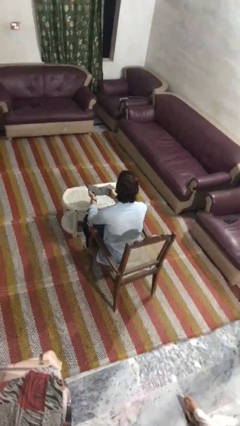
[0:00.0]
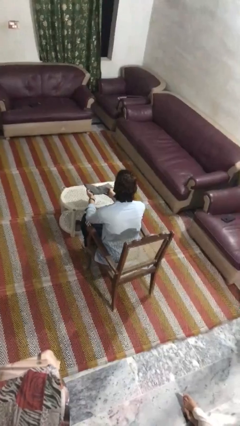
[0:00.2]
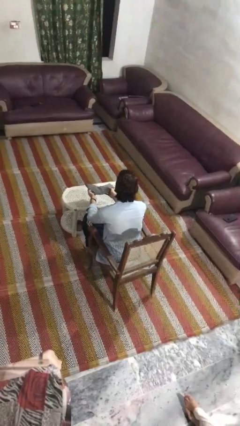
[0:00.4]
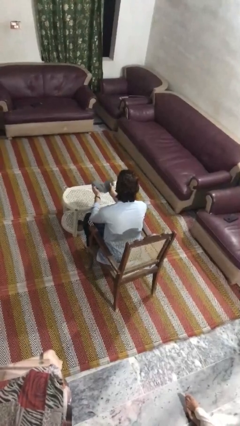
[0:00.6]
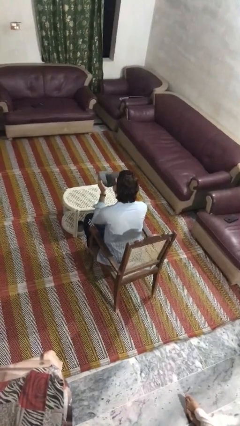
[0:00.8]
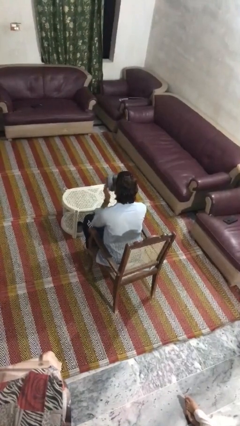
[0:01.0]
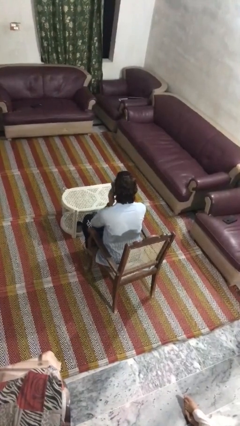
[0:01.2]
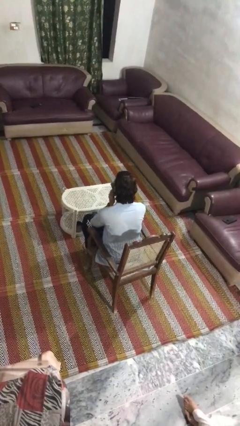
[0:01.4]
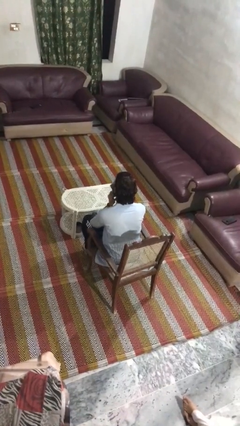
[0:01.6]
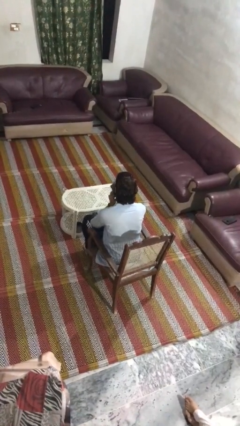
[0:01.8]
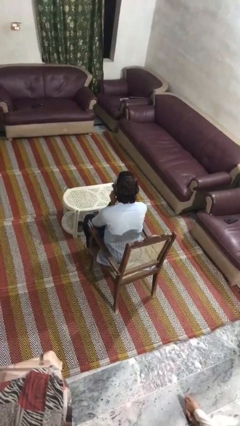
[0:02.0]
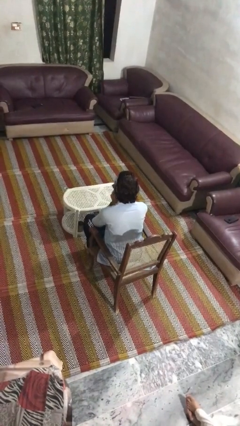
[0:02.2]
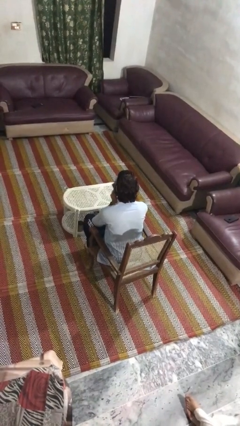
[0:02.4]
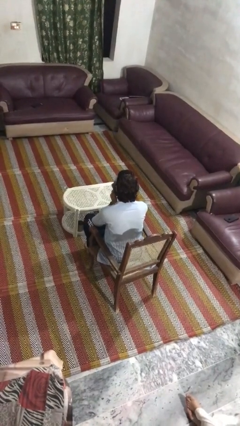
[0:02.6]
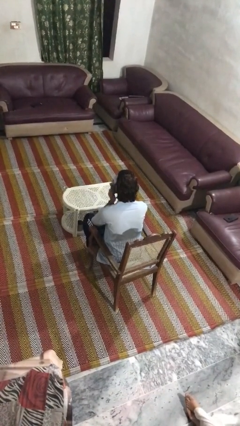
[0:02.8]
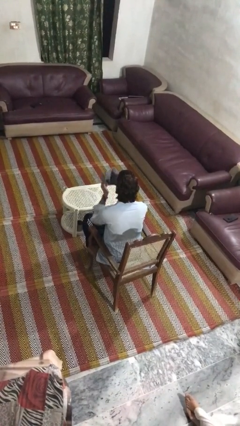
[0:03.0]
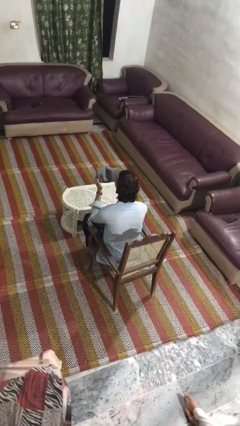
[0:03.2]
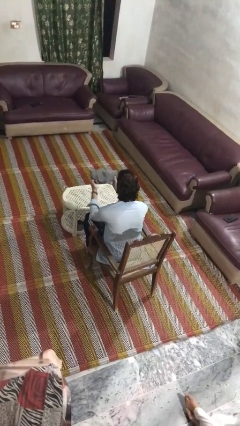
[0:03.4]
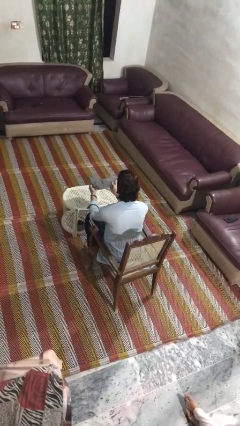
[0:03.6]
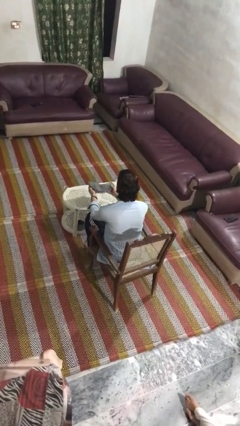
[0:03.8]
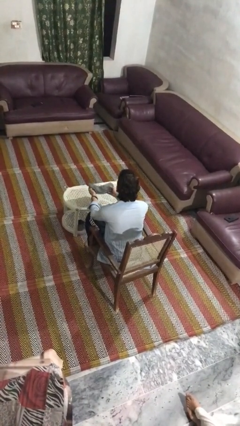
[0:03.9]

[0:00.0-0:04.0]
person wipes mouth with napkin

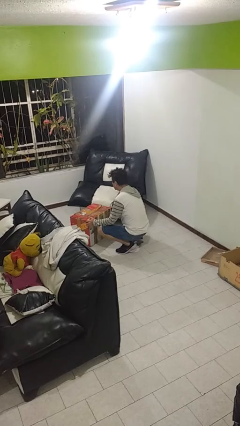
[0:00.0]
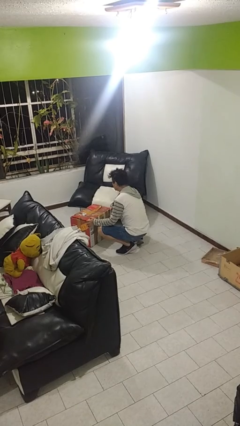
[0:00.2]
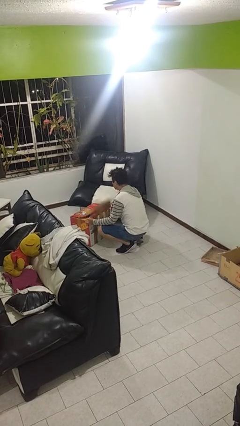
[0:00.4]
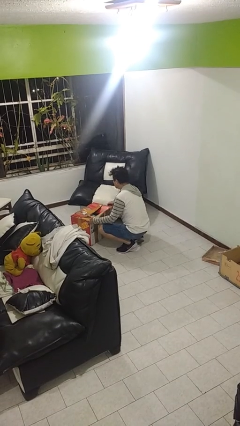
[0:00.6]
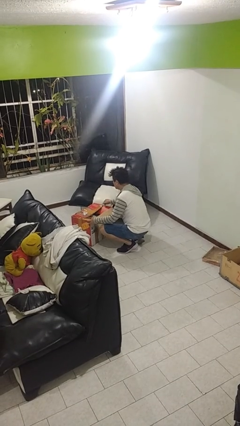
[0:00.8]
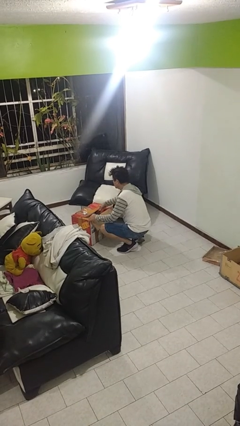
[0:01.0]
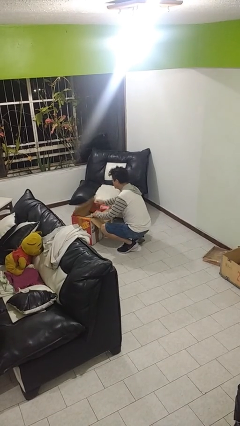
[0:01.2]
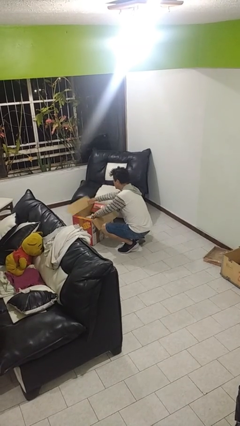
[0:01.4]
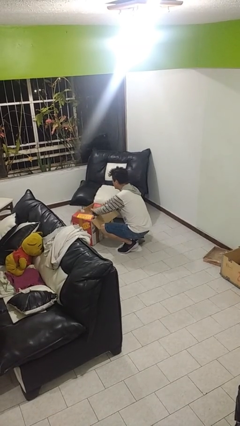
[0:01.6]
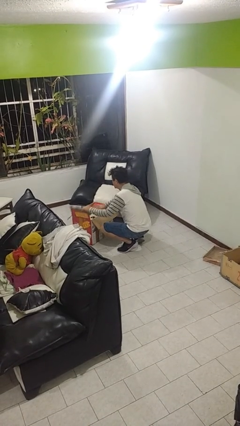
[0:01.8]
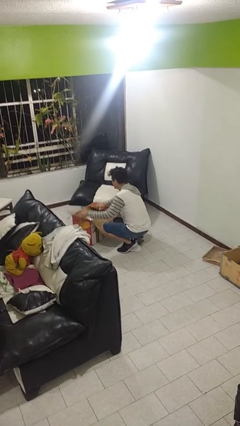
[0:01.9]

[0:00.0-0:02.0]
person opens box

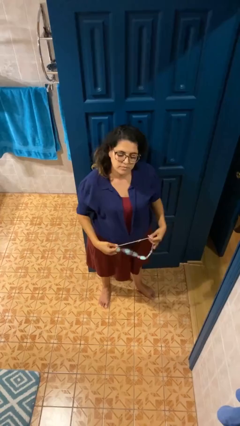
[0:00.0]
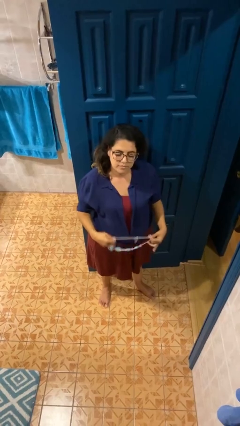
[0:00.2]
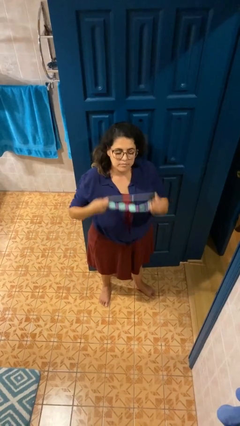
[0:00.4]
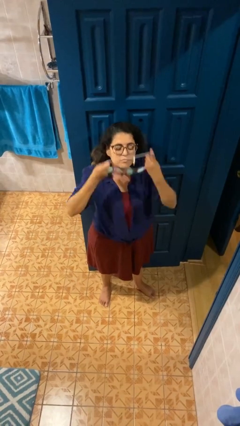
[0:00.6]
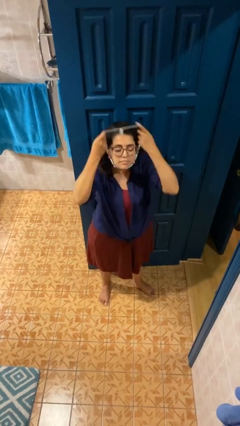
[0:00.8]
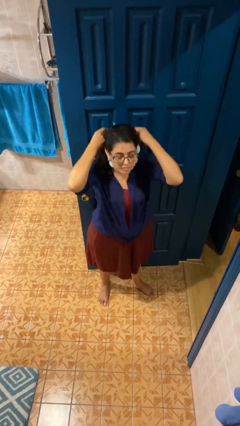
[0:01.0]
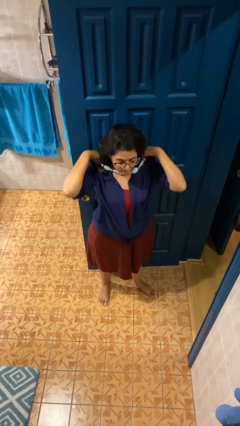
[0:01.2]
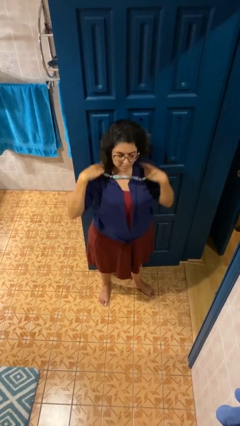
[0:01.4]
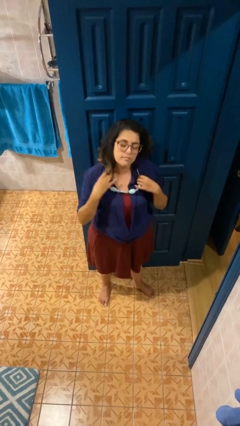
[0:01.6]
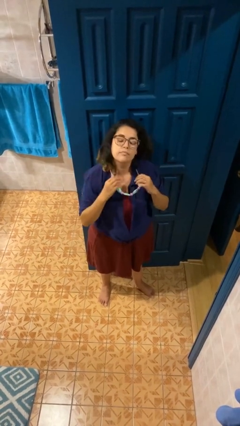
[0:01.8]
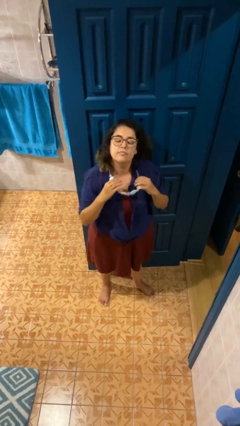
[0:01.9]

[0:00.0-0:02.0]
person puts on necklace

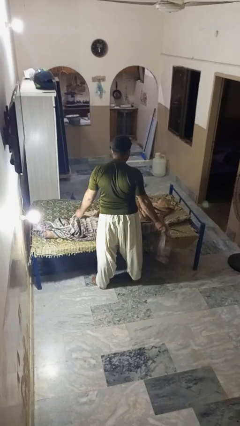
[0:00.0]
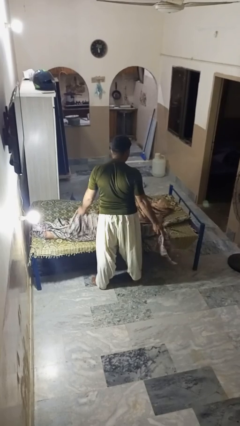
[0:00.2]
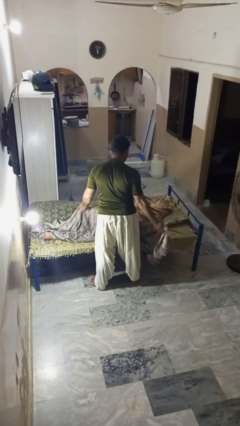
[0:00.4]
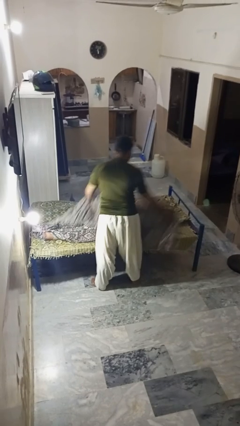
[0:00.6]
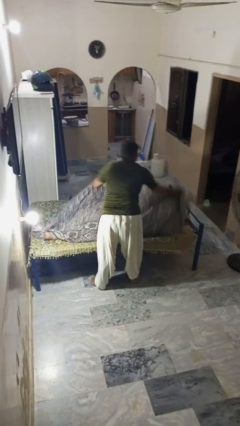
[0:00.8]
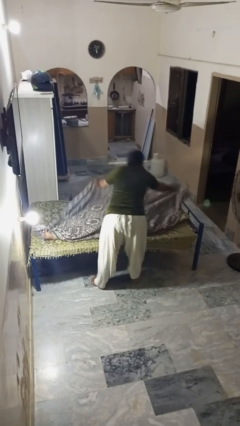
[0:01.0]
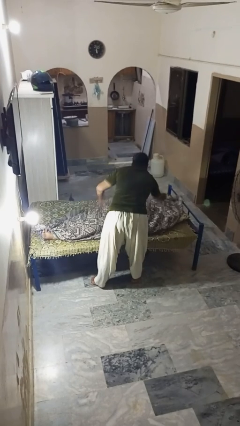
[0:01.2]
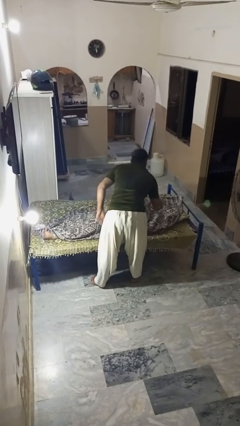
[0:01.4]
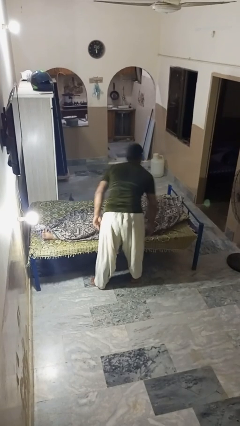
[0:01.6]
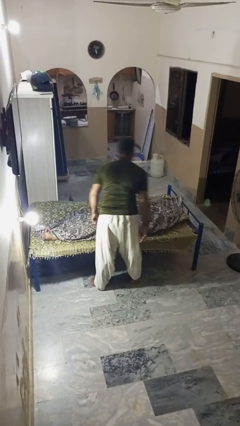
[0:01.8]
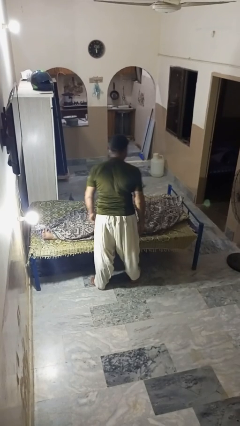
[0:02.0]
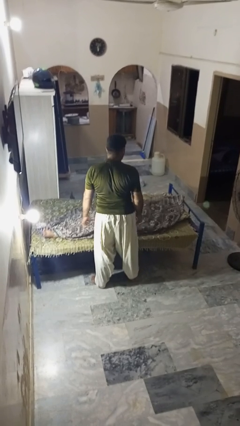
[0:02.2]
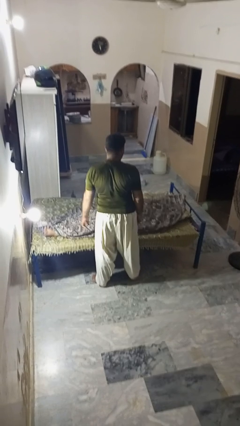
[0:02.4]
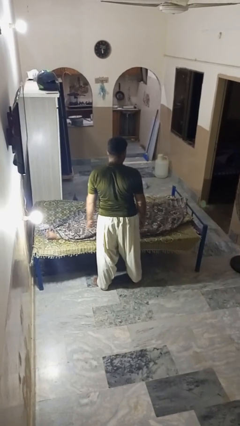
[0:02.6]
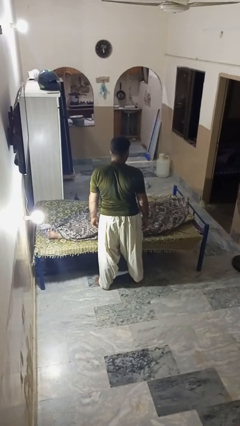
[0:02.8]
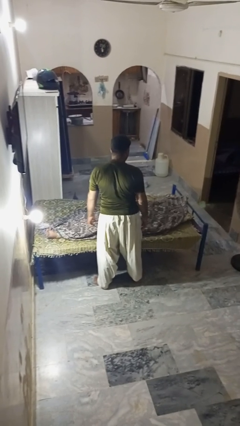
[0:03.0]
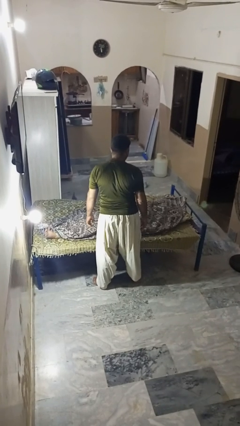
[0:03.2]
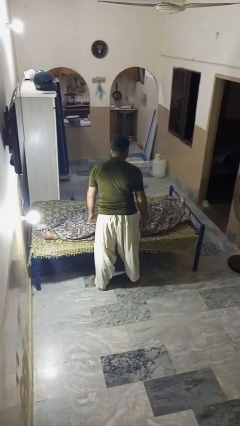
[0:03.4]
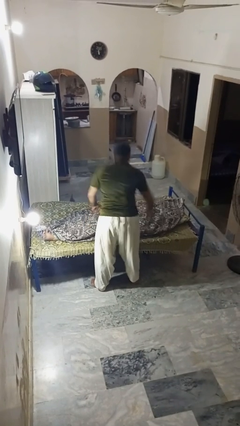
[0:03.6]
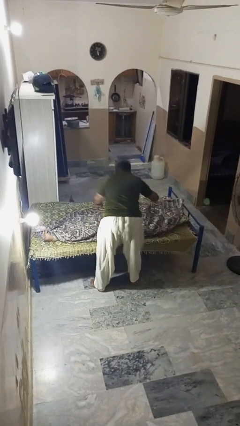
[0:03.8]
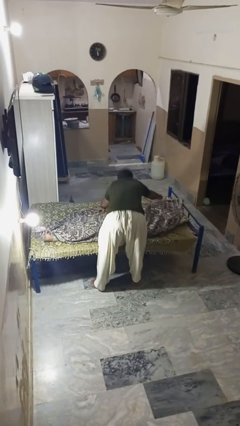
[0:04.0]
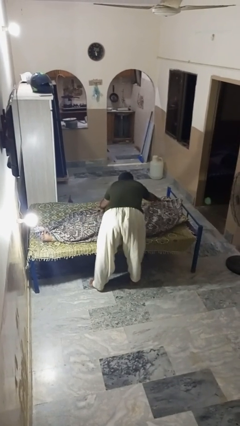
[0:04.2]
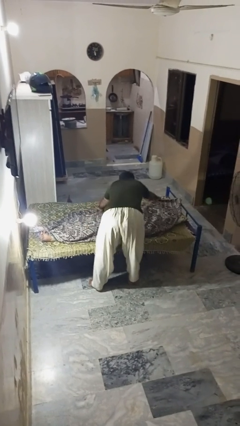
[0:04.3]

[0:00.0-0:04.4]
person covers friend with blanket

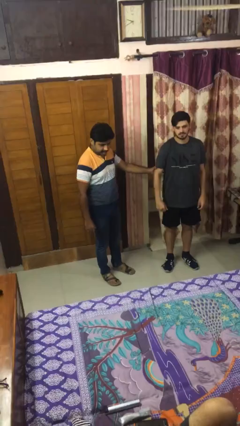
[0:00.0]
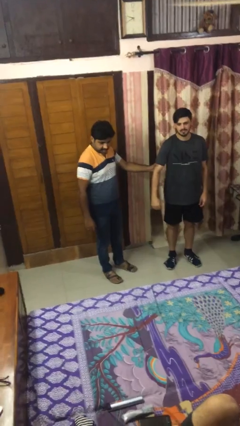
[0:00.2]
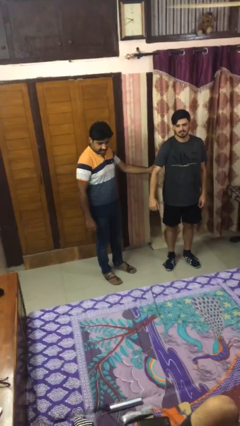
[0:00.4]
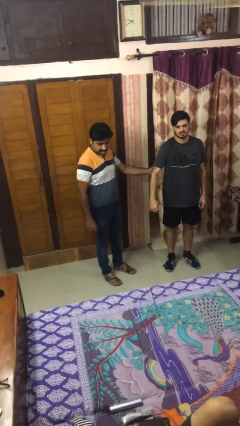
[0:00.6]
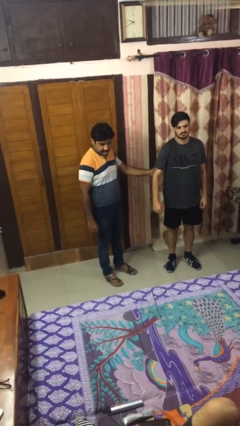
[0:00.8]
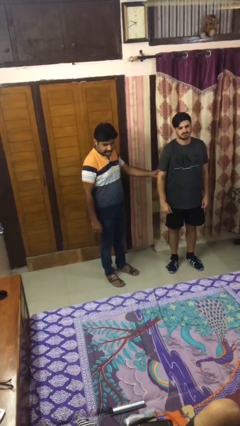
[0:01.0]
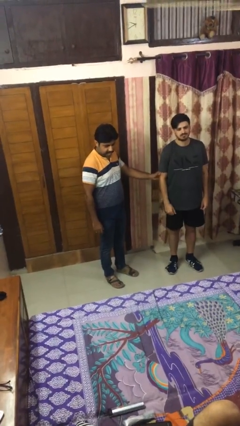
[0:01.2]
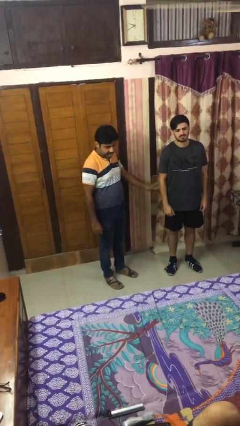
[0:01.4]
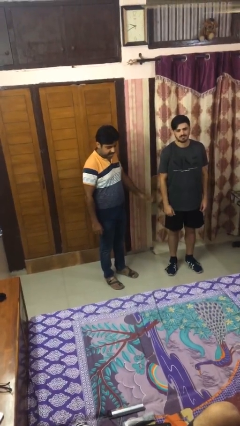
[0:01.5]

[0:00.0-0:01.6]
person grabs person by bicep

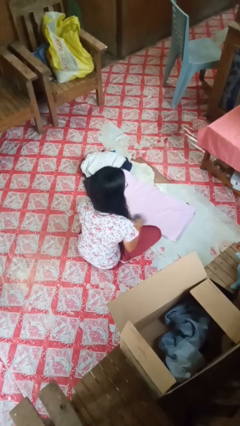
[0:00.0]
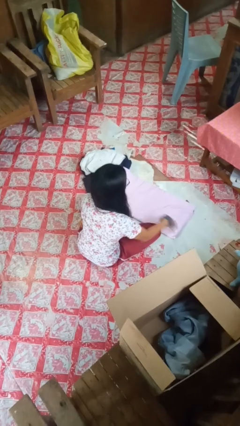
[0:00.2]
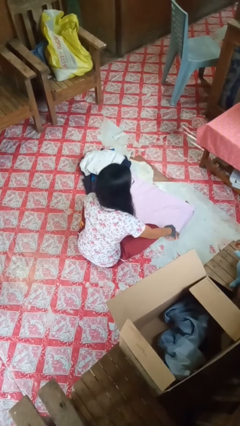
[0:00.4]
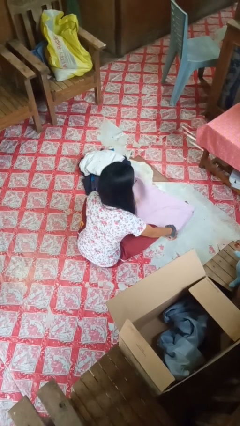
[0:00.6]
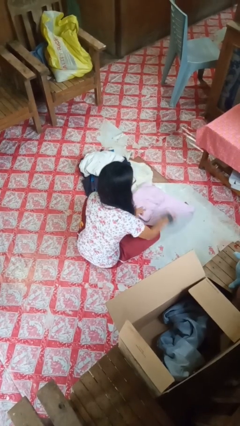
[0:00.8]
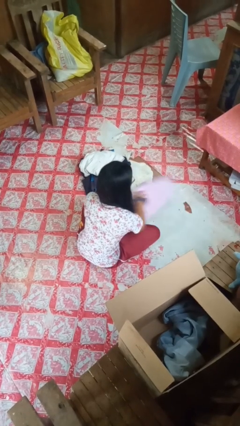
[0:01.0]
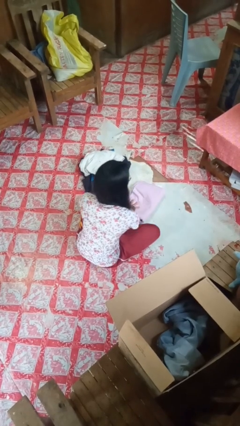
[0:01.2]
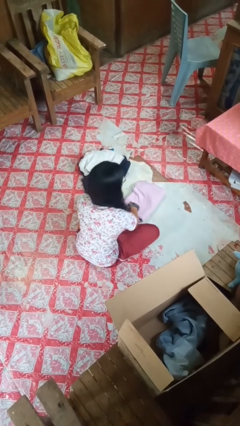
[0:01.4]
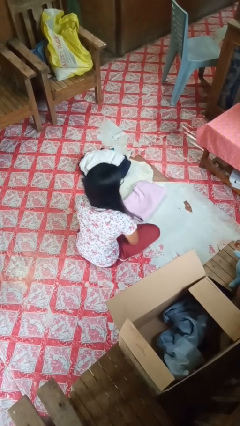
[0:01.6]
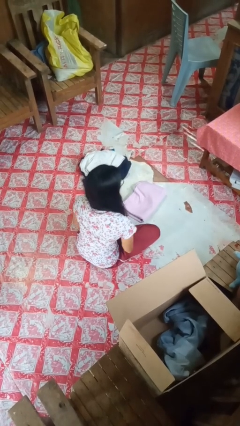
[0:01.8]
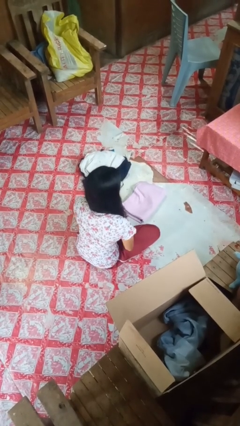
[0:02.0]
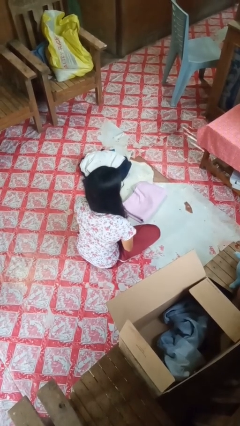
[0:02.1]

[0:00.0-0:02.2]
person folds towel

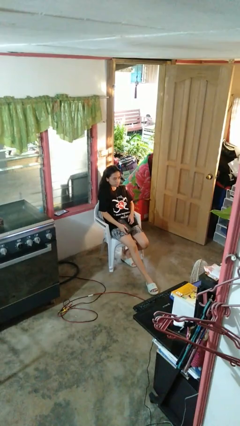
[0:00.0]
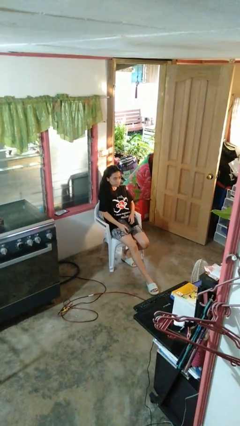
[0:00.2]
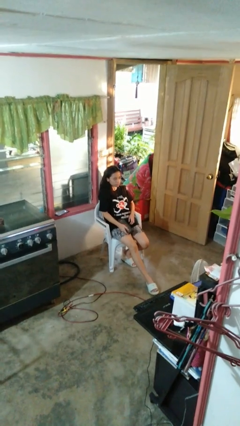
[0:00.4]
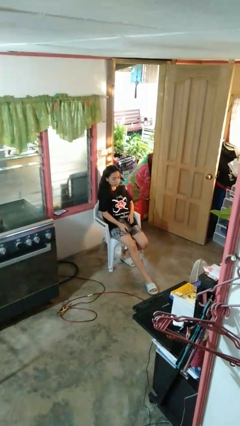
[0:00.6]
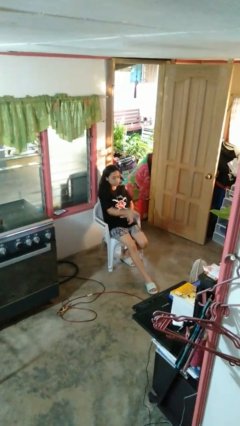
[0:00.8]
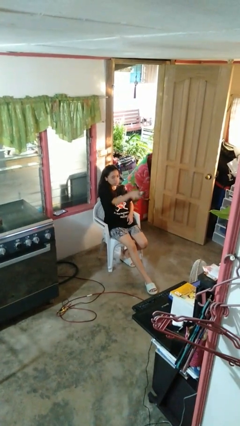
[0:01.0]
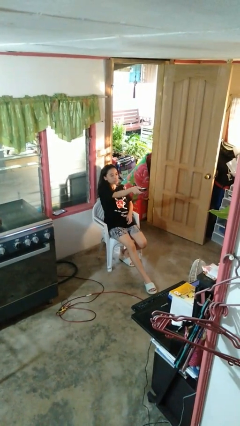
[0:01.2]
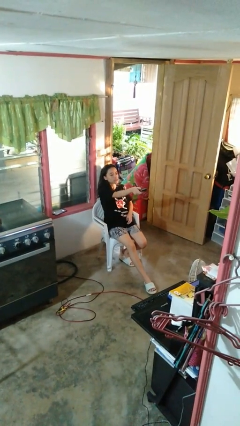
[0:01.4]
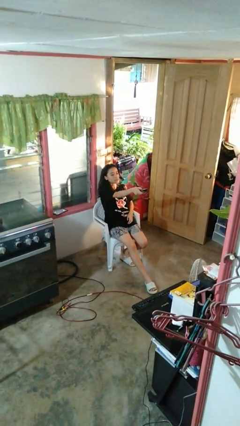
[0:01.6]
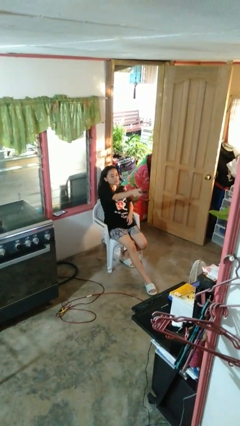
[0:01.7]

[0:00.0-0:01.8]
person uses television remote
